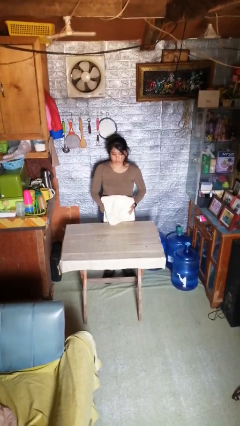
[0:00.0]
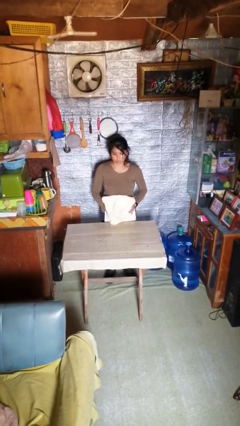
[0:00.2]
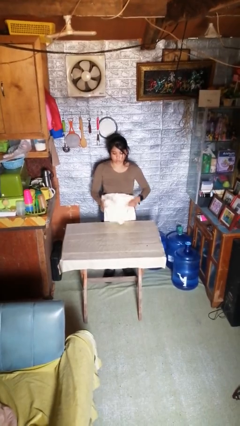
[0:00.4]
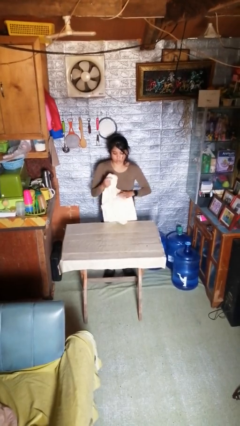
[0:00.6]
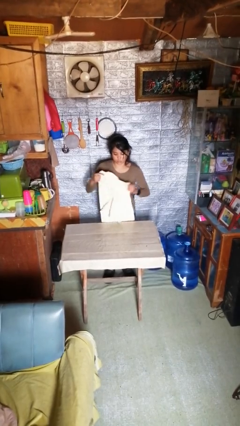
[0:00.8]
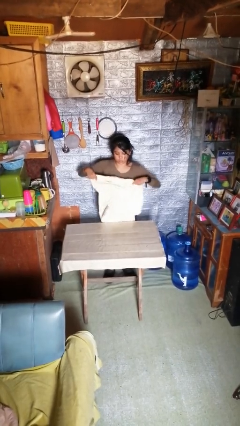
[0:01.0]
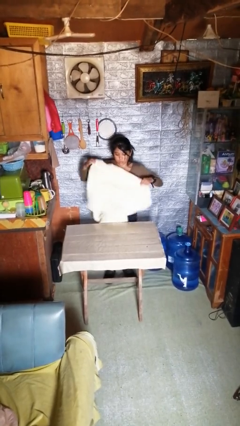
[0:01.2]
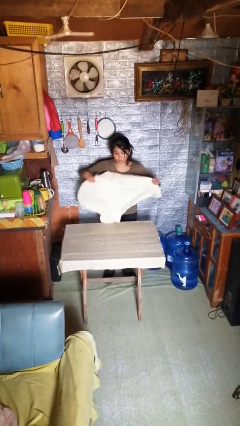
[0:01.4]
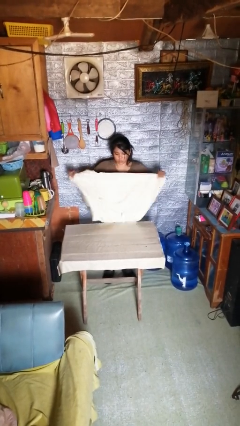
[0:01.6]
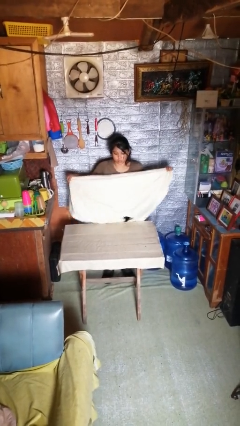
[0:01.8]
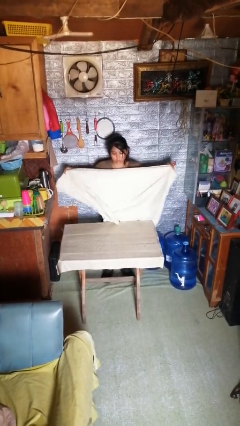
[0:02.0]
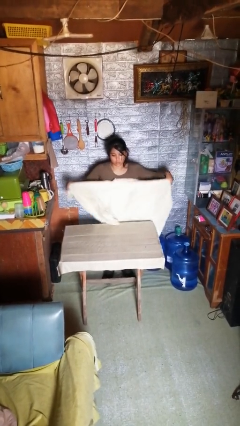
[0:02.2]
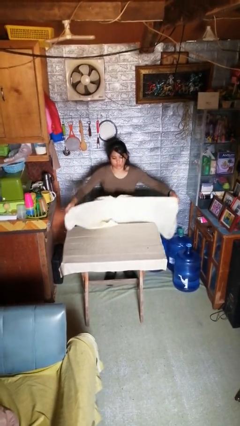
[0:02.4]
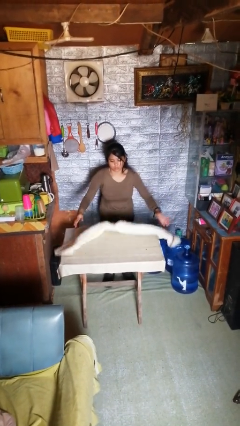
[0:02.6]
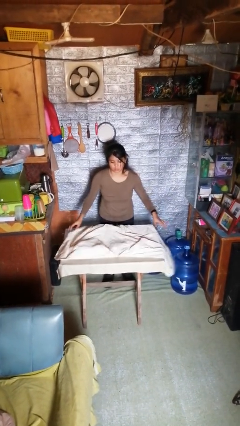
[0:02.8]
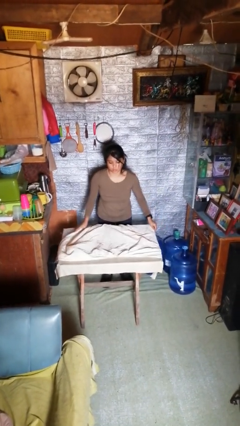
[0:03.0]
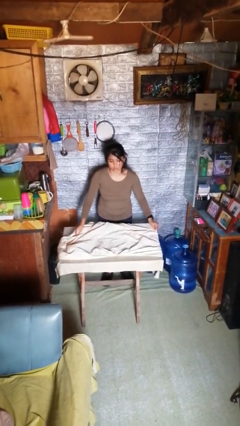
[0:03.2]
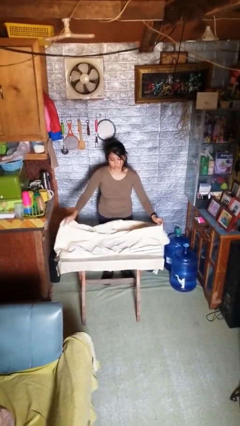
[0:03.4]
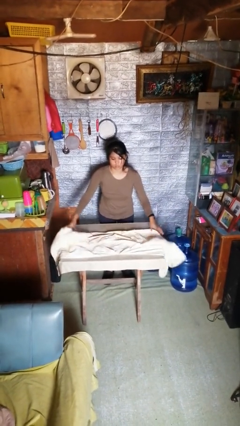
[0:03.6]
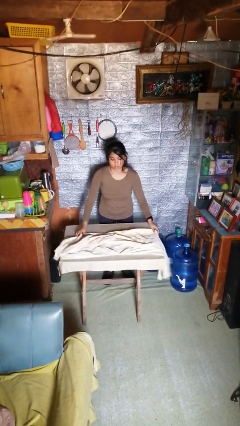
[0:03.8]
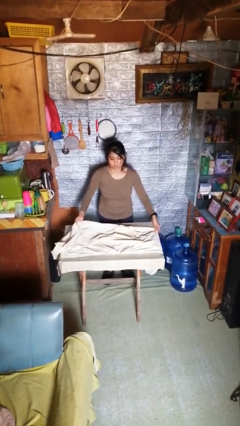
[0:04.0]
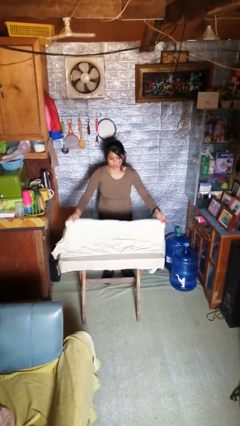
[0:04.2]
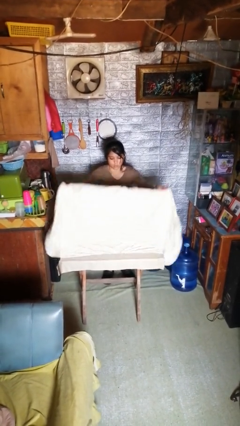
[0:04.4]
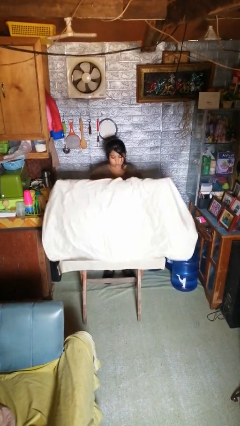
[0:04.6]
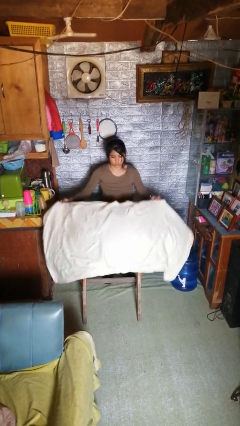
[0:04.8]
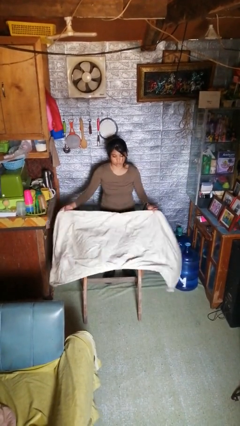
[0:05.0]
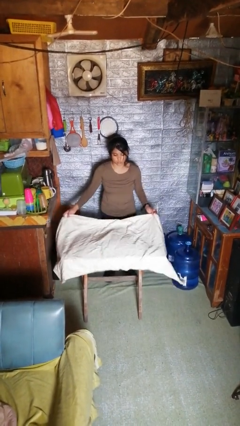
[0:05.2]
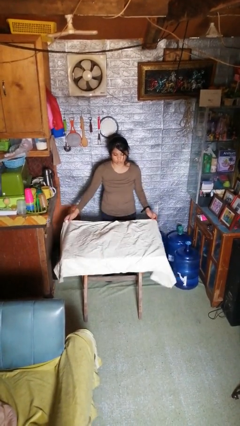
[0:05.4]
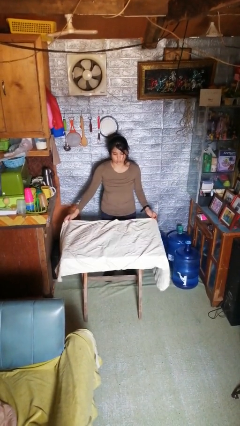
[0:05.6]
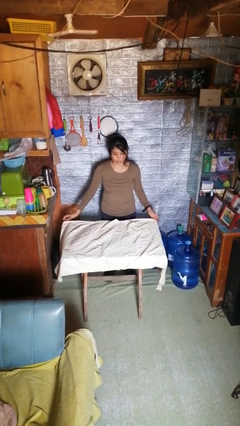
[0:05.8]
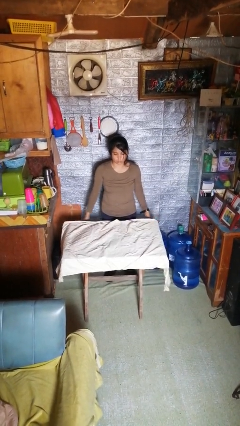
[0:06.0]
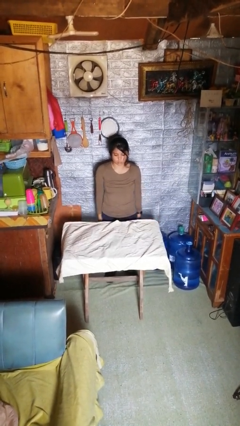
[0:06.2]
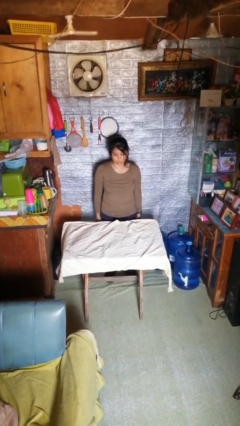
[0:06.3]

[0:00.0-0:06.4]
person spreads tablecloth

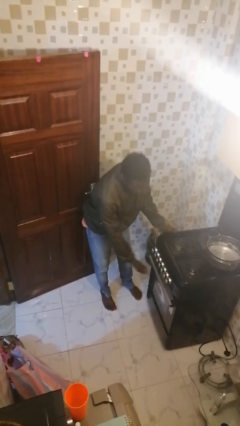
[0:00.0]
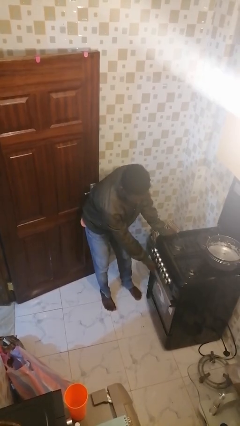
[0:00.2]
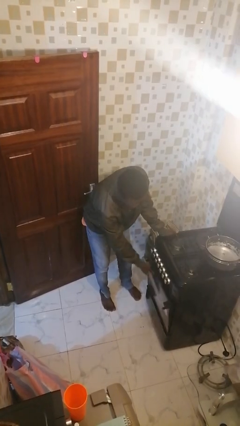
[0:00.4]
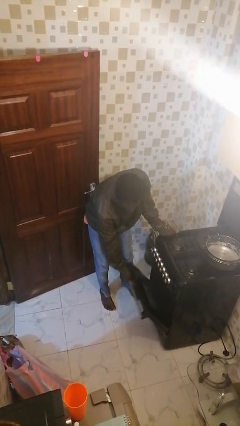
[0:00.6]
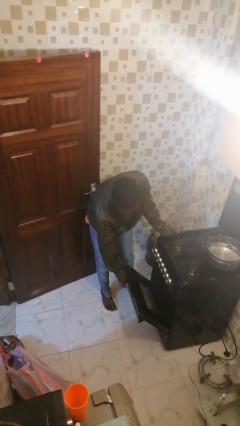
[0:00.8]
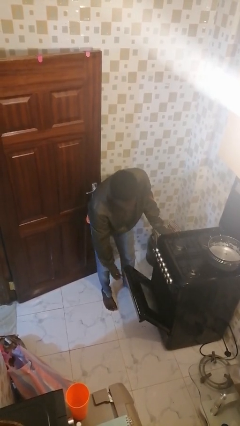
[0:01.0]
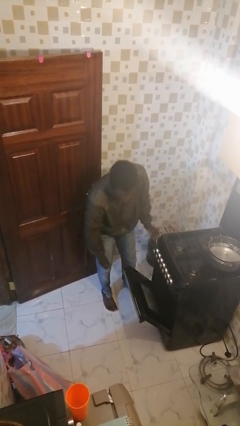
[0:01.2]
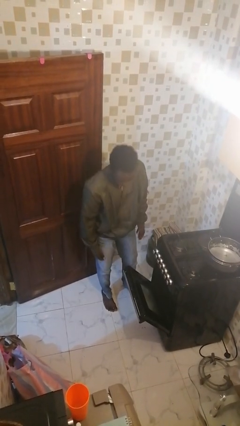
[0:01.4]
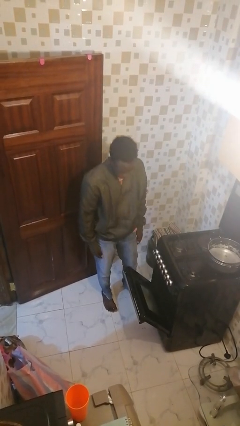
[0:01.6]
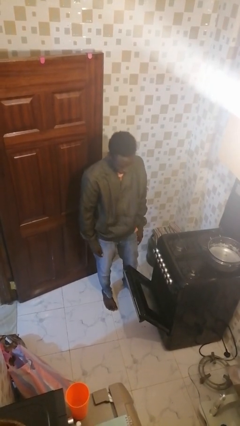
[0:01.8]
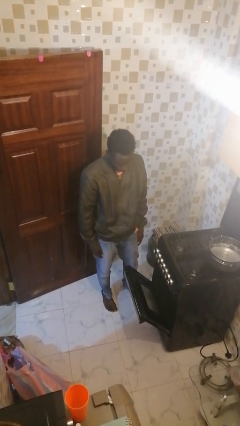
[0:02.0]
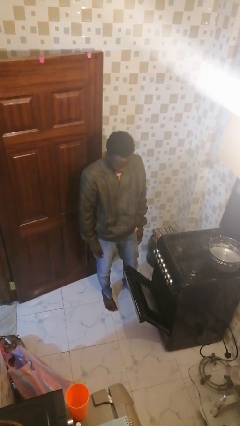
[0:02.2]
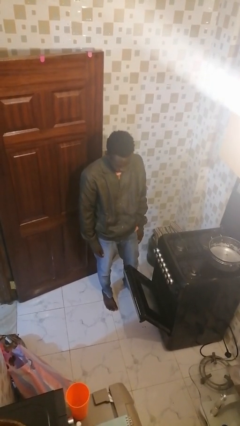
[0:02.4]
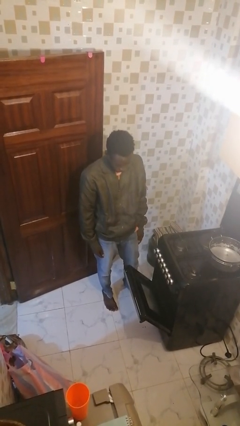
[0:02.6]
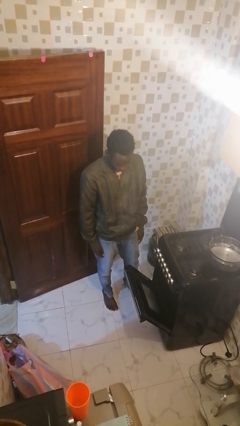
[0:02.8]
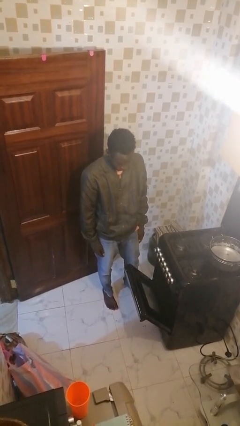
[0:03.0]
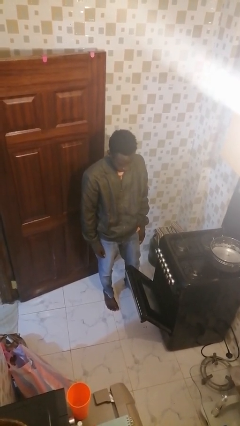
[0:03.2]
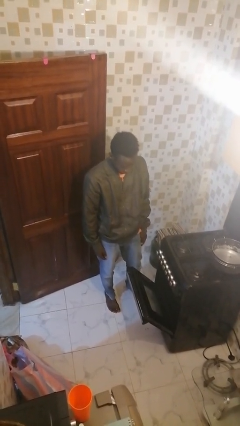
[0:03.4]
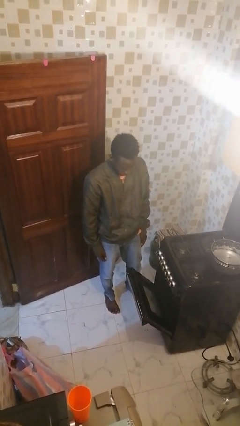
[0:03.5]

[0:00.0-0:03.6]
person opens oven door

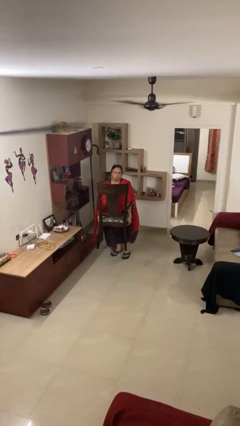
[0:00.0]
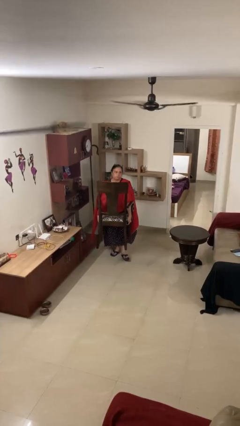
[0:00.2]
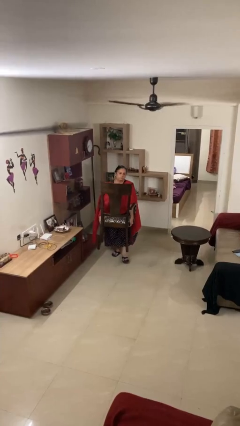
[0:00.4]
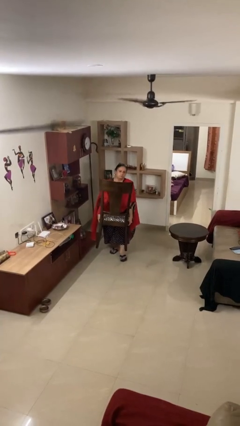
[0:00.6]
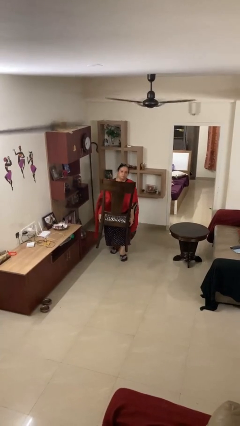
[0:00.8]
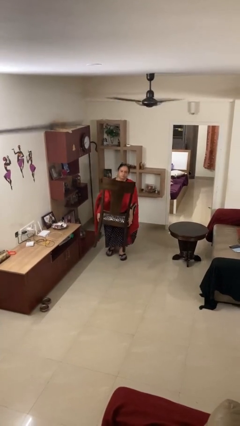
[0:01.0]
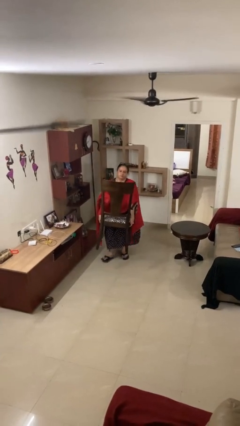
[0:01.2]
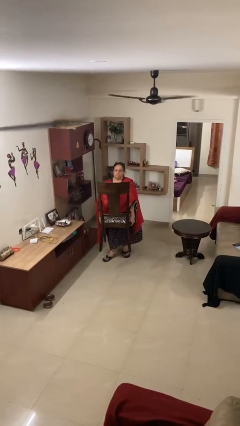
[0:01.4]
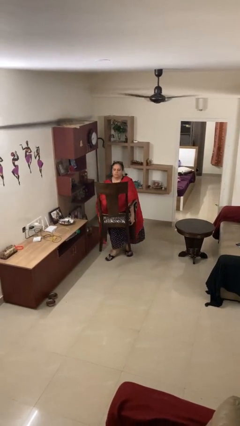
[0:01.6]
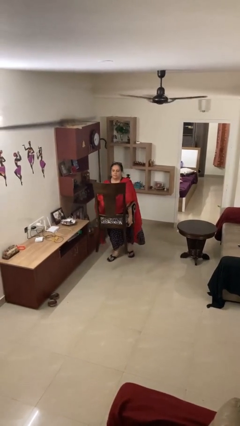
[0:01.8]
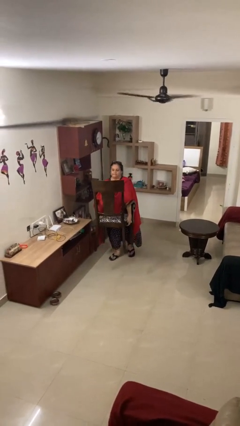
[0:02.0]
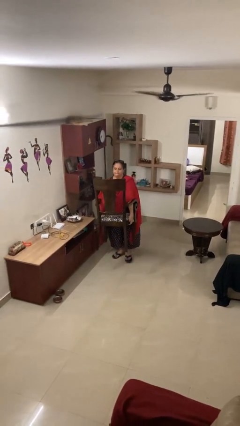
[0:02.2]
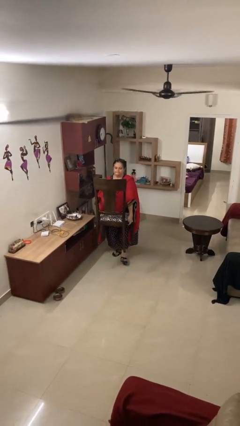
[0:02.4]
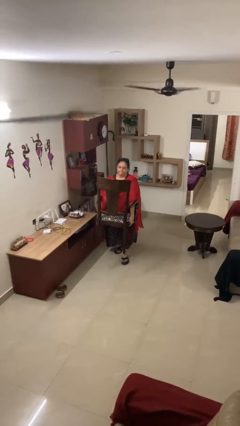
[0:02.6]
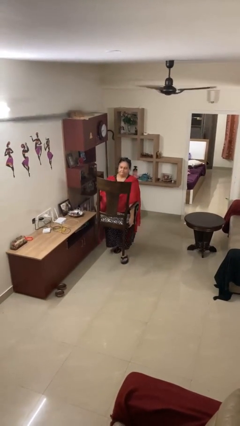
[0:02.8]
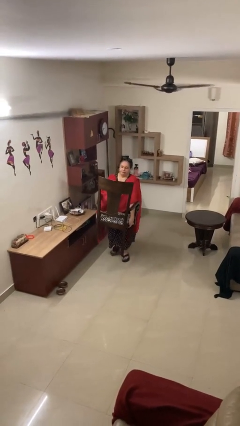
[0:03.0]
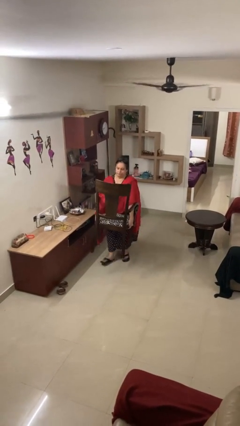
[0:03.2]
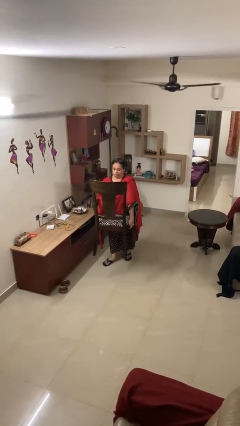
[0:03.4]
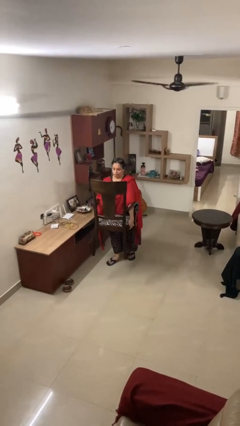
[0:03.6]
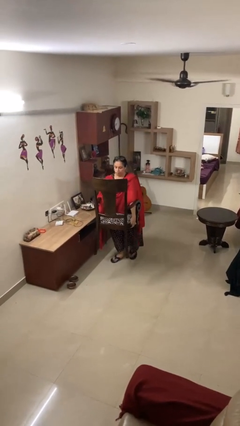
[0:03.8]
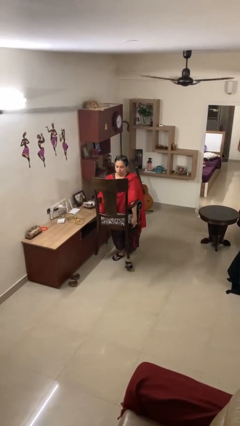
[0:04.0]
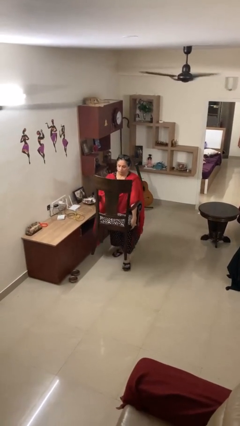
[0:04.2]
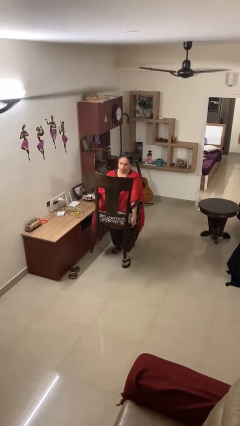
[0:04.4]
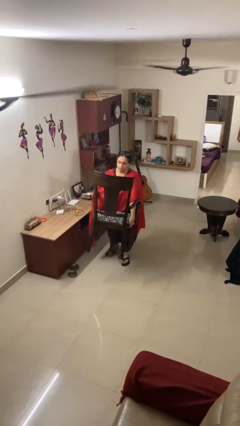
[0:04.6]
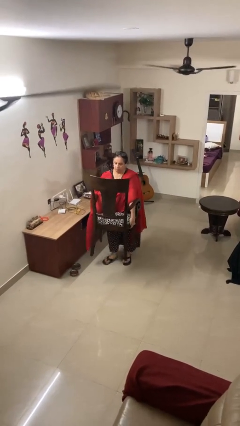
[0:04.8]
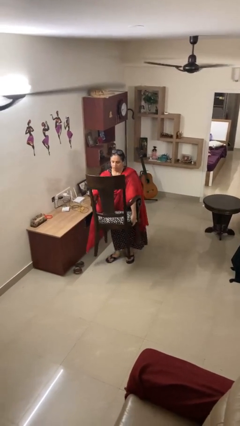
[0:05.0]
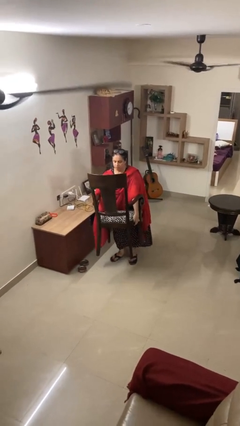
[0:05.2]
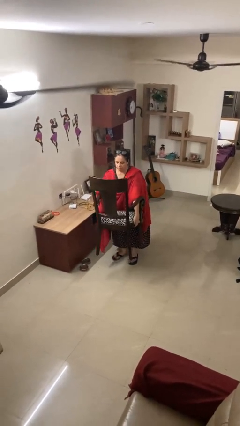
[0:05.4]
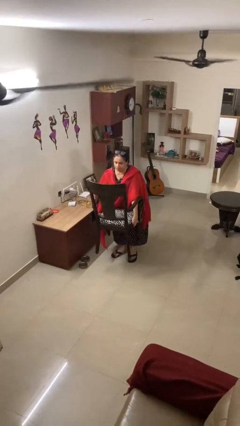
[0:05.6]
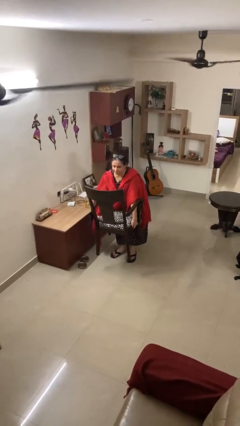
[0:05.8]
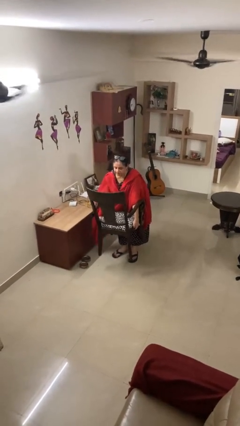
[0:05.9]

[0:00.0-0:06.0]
person carries heavy object

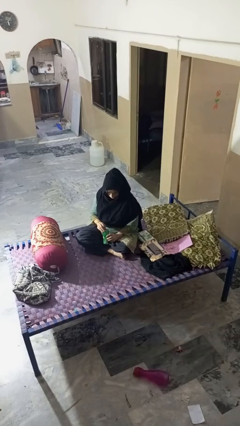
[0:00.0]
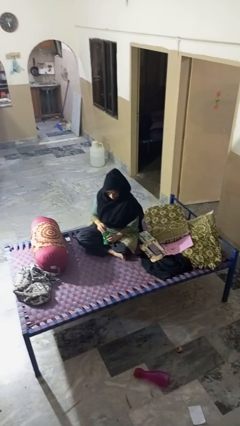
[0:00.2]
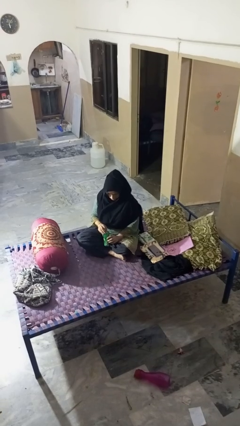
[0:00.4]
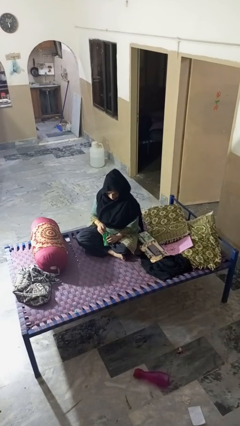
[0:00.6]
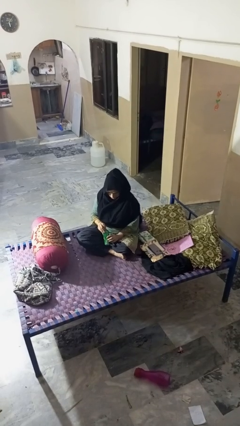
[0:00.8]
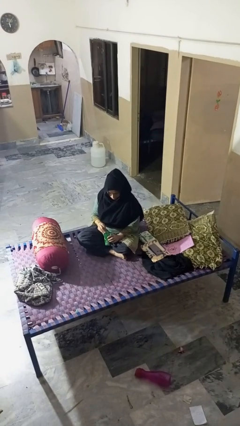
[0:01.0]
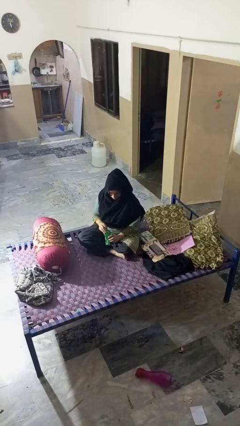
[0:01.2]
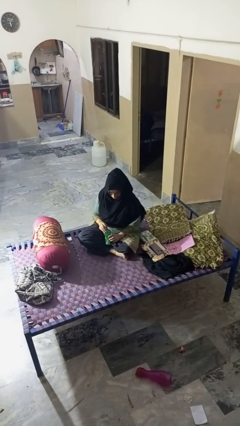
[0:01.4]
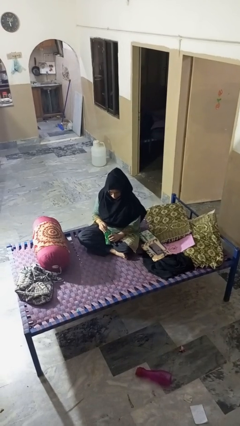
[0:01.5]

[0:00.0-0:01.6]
person opens can with can opener

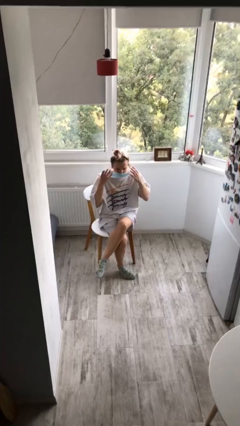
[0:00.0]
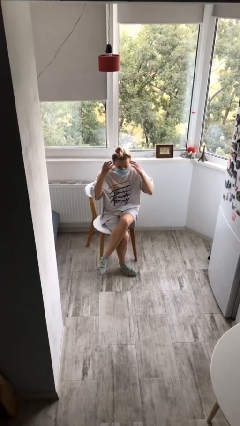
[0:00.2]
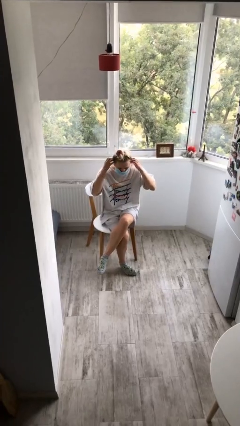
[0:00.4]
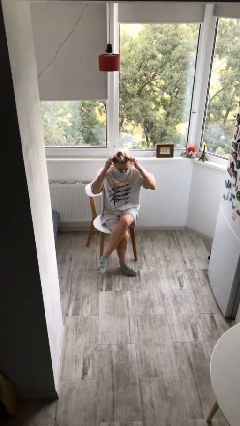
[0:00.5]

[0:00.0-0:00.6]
person puts on facemask
